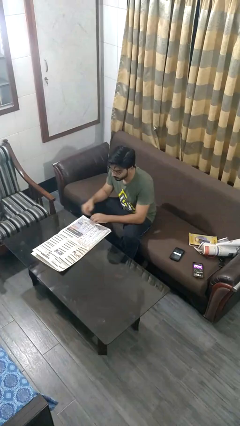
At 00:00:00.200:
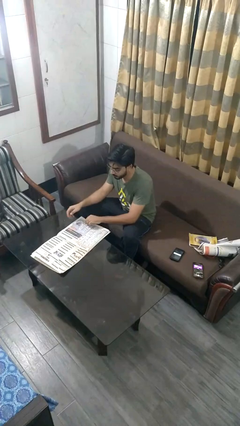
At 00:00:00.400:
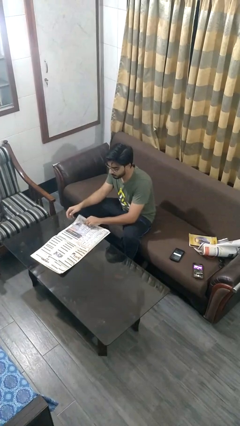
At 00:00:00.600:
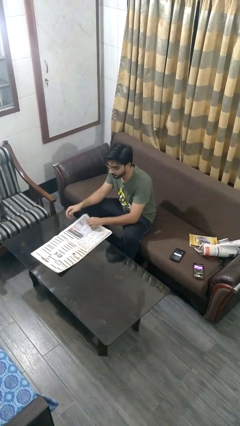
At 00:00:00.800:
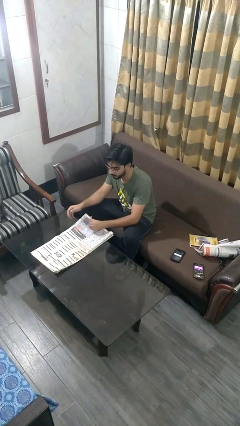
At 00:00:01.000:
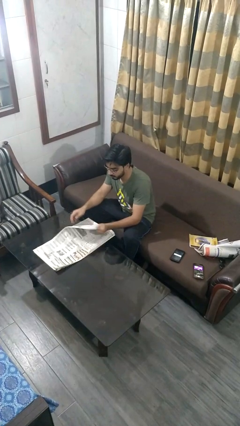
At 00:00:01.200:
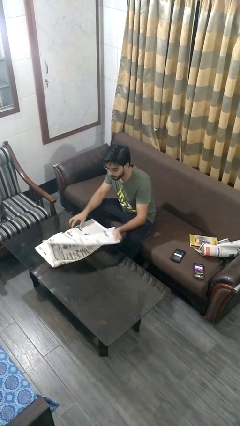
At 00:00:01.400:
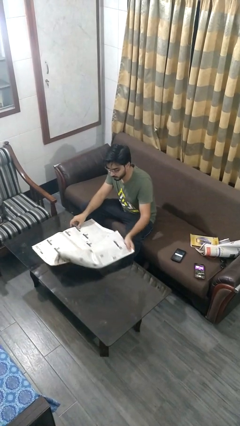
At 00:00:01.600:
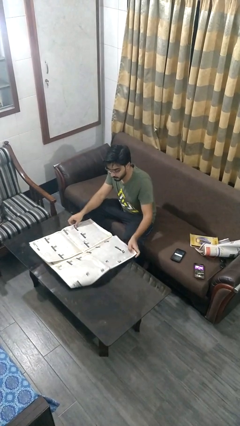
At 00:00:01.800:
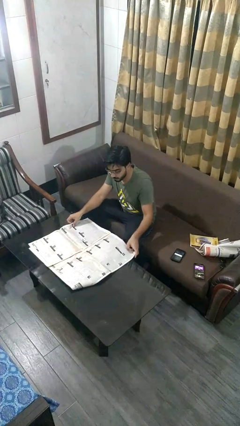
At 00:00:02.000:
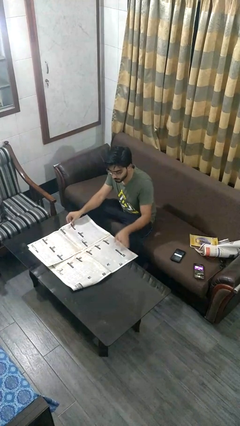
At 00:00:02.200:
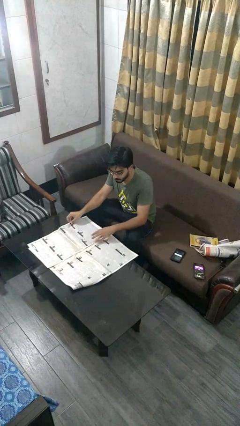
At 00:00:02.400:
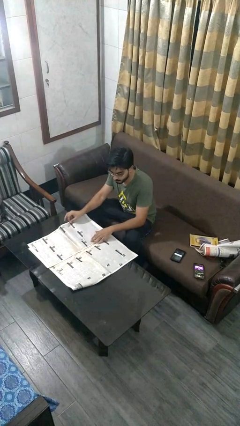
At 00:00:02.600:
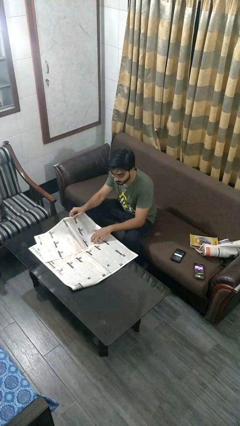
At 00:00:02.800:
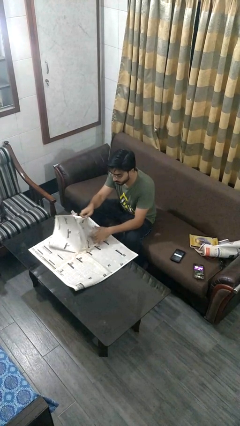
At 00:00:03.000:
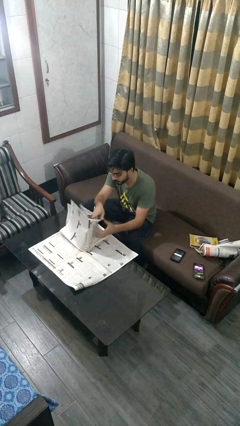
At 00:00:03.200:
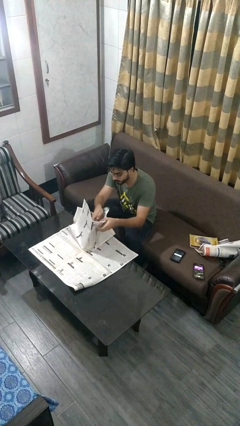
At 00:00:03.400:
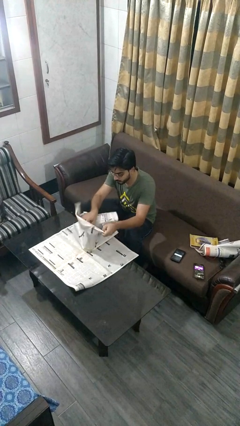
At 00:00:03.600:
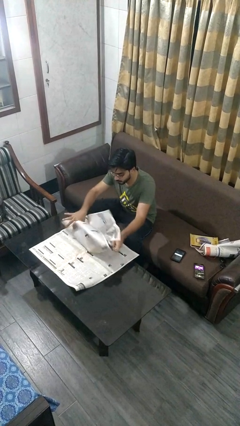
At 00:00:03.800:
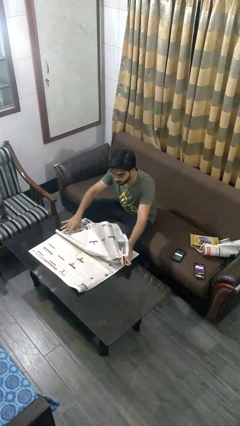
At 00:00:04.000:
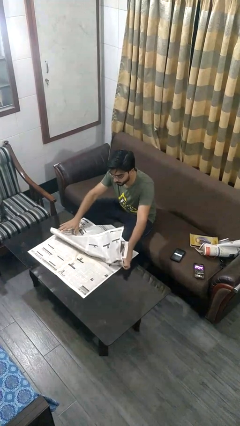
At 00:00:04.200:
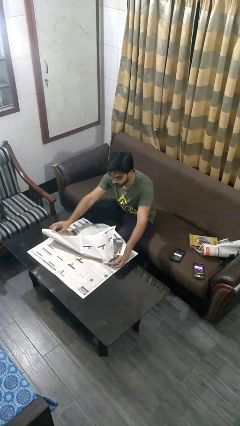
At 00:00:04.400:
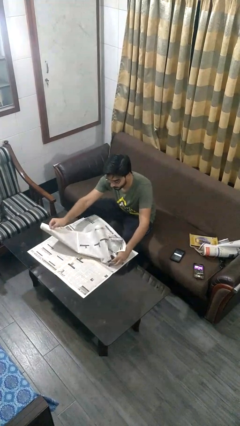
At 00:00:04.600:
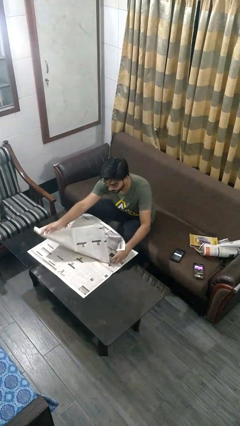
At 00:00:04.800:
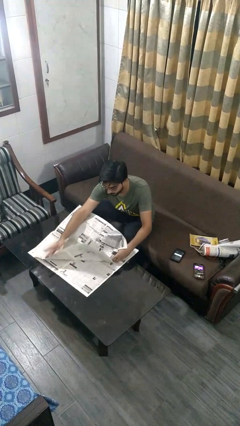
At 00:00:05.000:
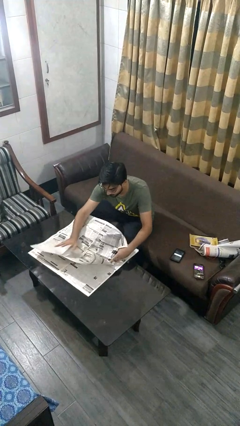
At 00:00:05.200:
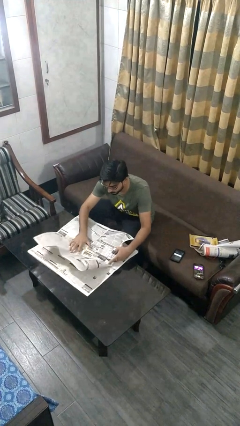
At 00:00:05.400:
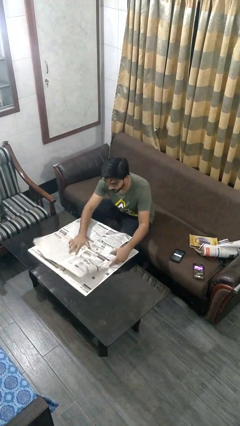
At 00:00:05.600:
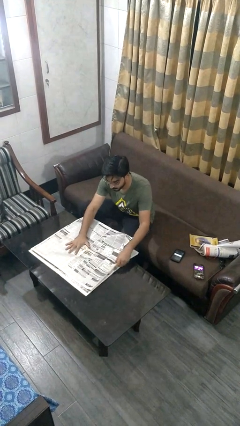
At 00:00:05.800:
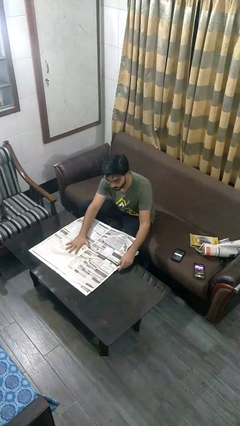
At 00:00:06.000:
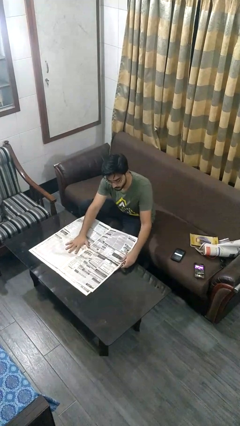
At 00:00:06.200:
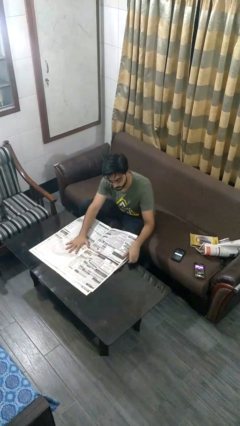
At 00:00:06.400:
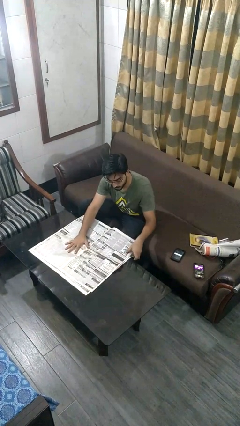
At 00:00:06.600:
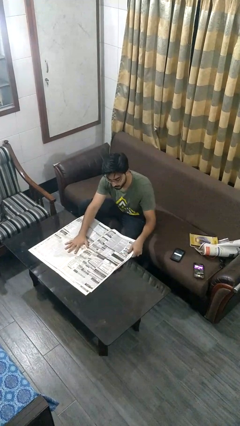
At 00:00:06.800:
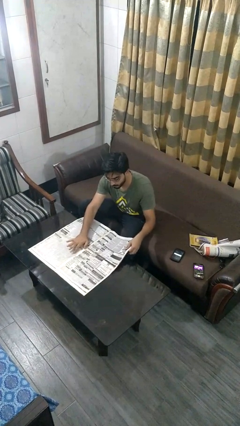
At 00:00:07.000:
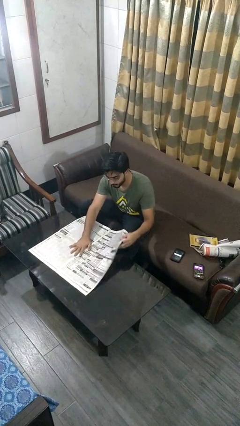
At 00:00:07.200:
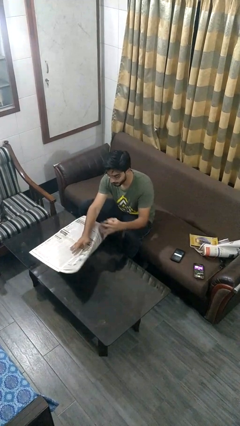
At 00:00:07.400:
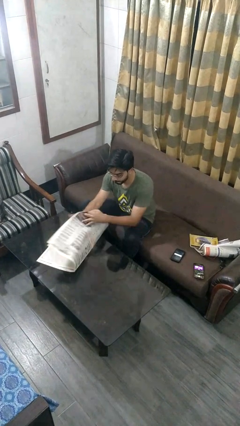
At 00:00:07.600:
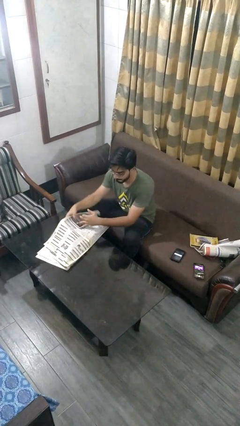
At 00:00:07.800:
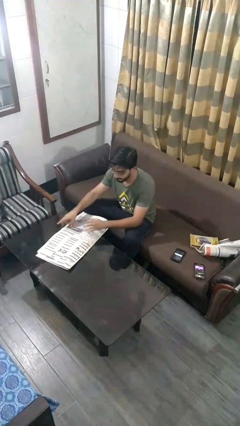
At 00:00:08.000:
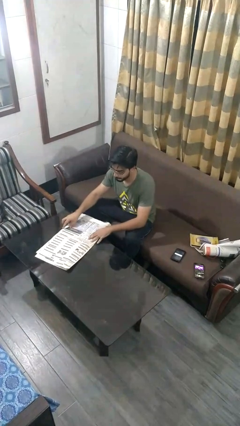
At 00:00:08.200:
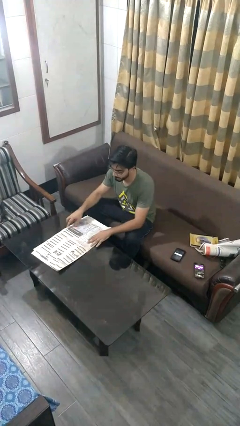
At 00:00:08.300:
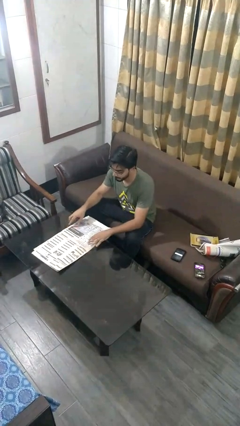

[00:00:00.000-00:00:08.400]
person reads newspaper

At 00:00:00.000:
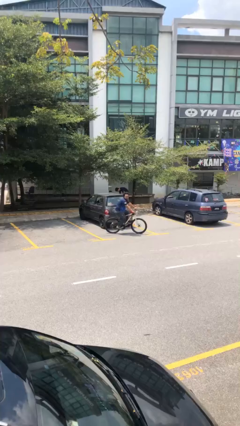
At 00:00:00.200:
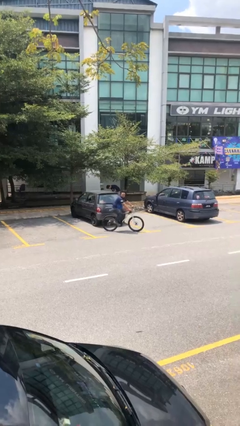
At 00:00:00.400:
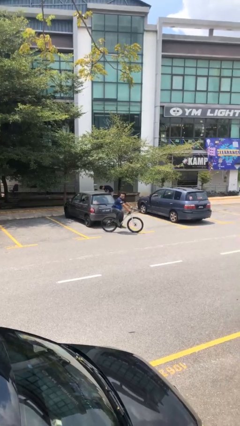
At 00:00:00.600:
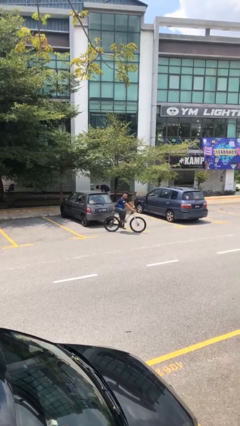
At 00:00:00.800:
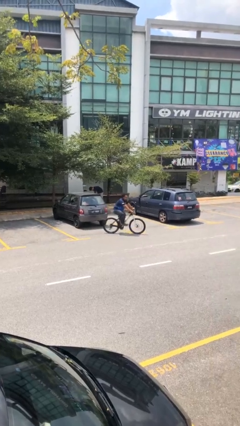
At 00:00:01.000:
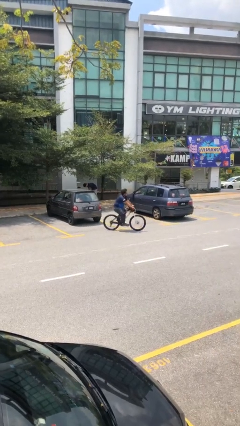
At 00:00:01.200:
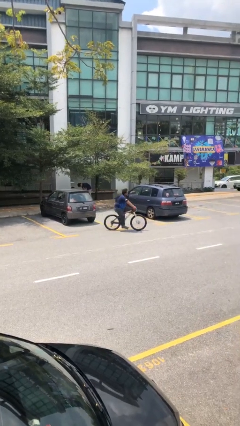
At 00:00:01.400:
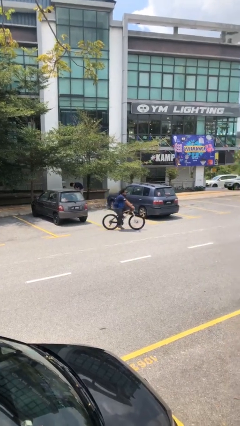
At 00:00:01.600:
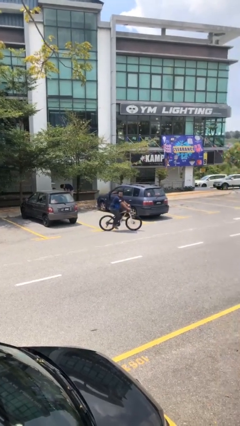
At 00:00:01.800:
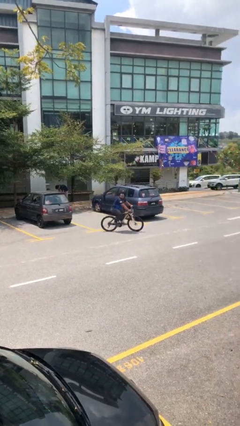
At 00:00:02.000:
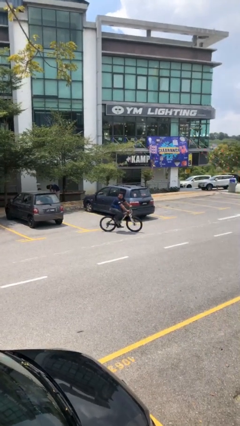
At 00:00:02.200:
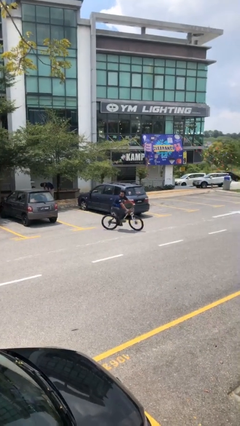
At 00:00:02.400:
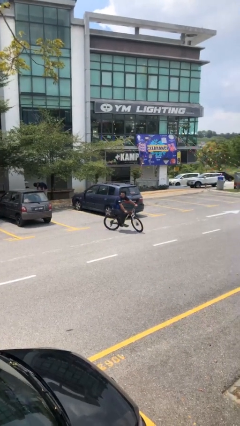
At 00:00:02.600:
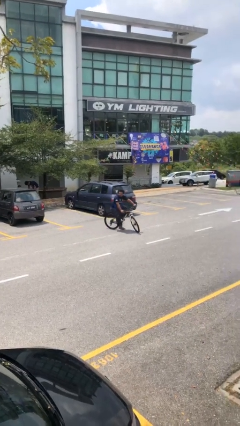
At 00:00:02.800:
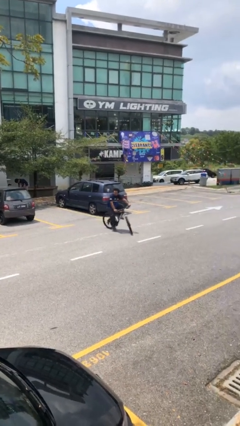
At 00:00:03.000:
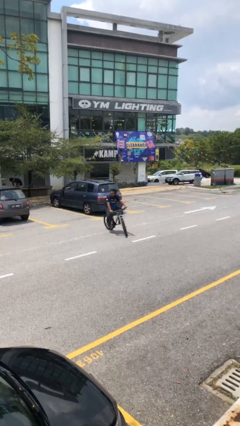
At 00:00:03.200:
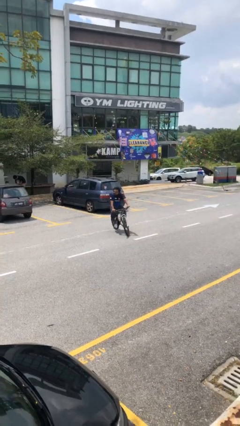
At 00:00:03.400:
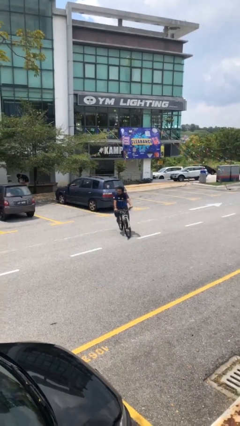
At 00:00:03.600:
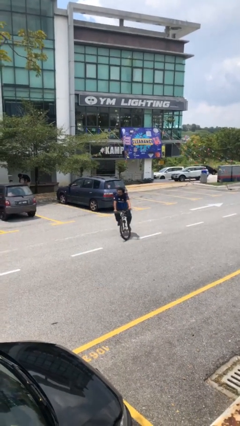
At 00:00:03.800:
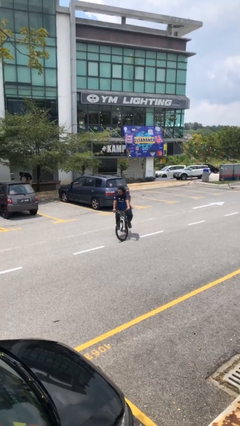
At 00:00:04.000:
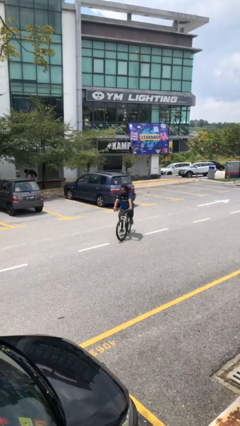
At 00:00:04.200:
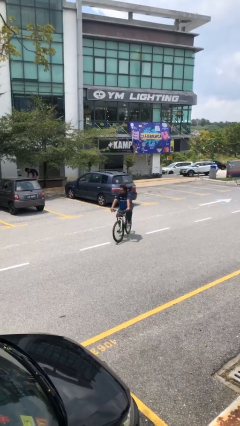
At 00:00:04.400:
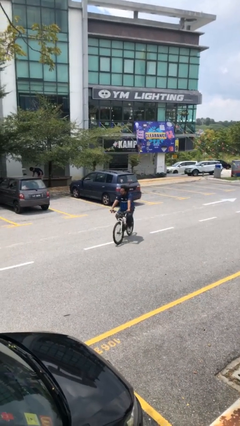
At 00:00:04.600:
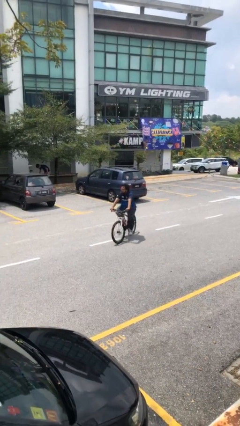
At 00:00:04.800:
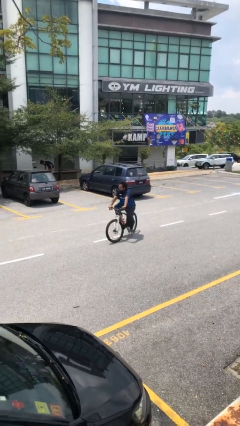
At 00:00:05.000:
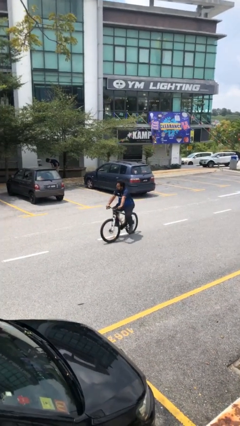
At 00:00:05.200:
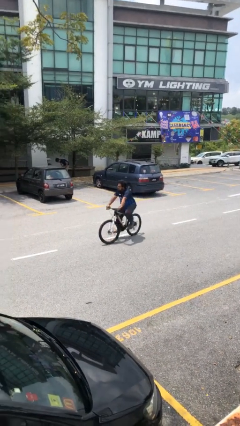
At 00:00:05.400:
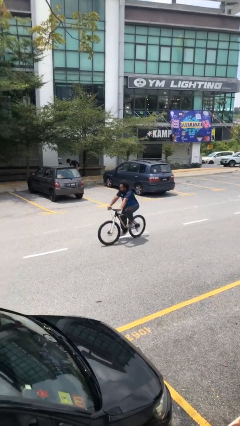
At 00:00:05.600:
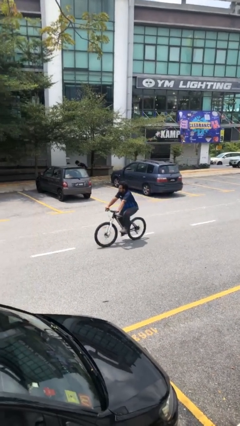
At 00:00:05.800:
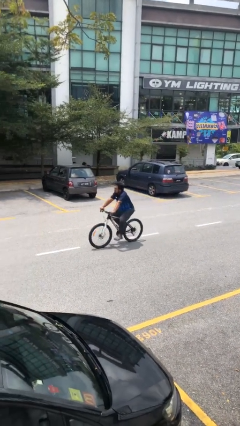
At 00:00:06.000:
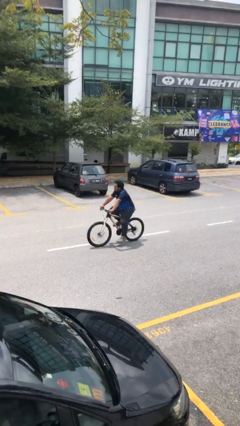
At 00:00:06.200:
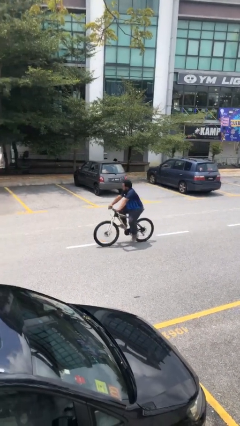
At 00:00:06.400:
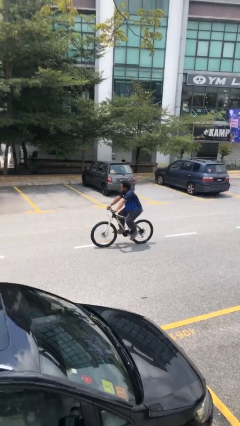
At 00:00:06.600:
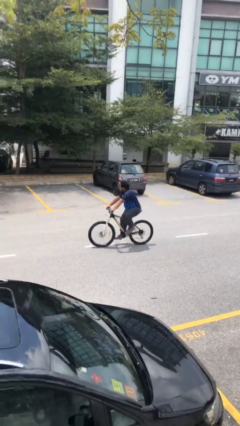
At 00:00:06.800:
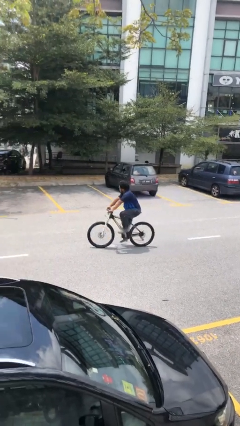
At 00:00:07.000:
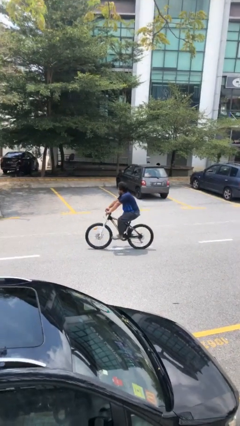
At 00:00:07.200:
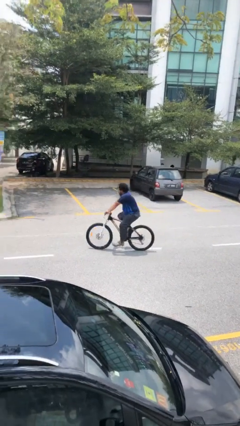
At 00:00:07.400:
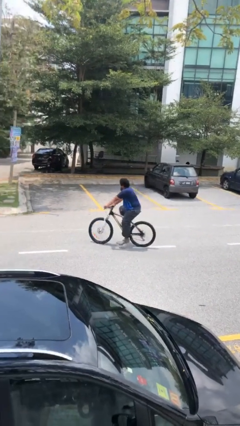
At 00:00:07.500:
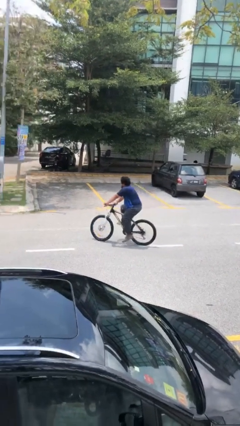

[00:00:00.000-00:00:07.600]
person rides bicycle

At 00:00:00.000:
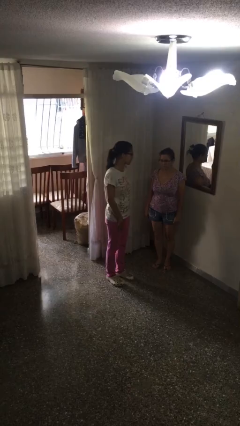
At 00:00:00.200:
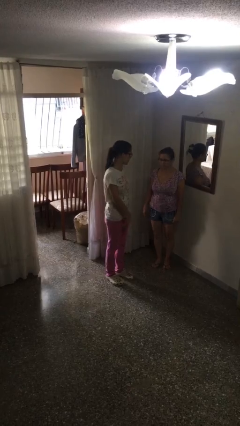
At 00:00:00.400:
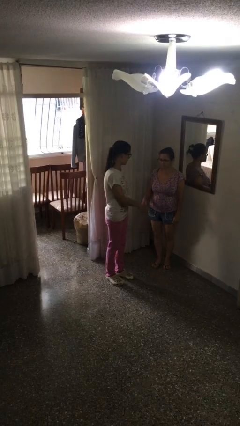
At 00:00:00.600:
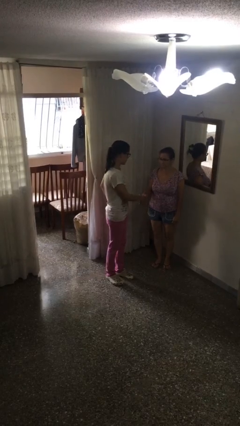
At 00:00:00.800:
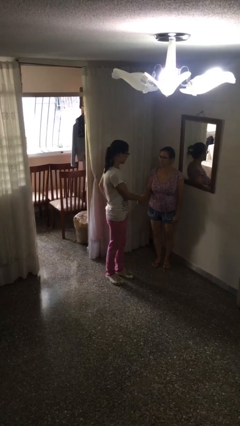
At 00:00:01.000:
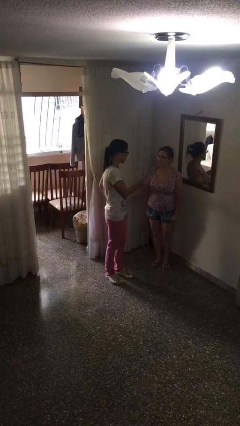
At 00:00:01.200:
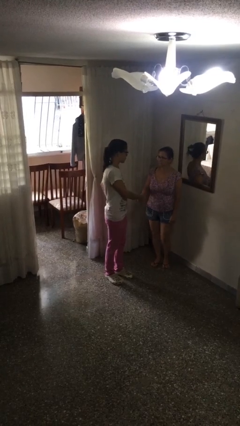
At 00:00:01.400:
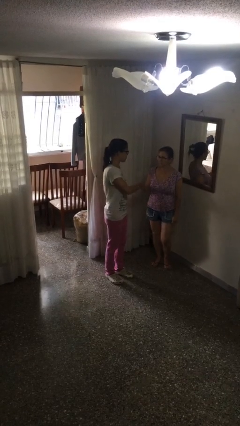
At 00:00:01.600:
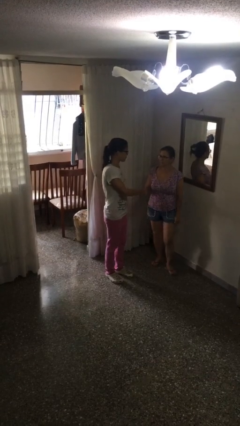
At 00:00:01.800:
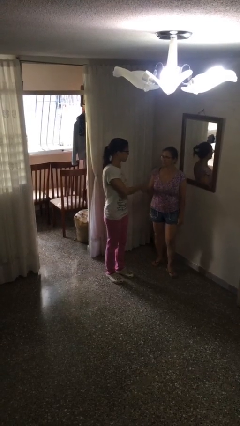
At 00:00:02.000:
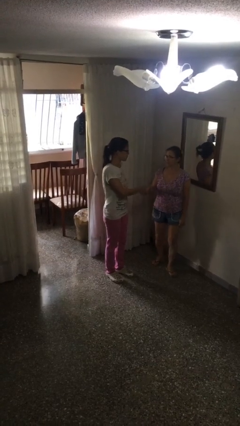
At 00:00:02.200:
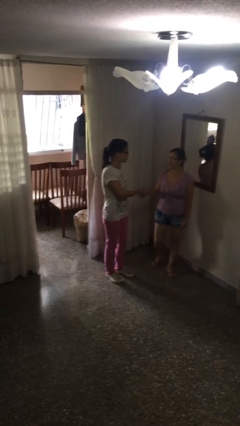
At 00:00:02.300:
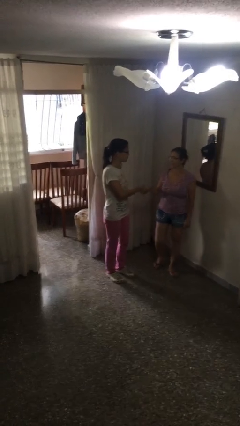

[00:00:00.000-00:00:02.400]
person shakes hand
